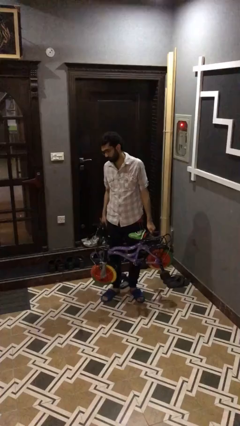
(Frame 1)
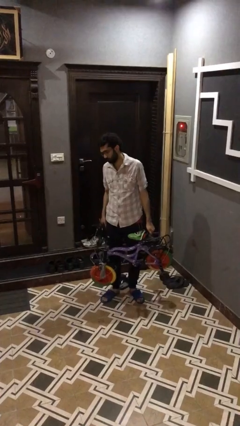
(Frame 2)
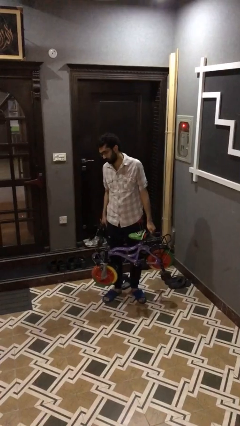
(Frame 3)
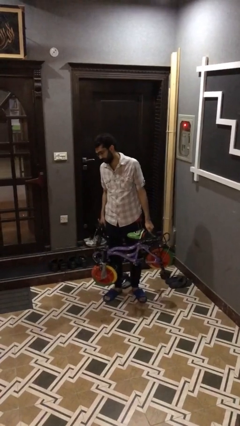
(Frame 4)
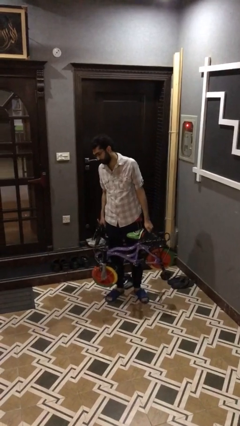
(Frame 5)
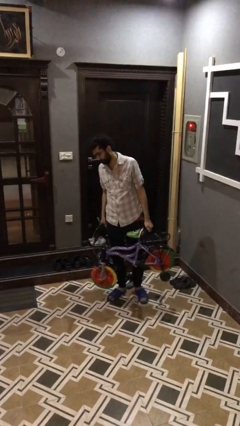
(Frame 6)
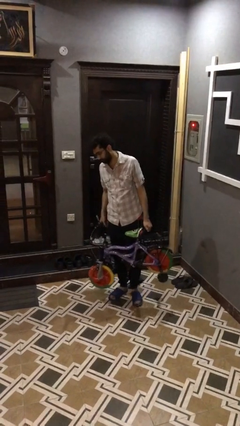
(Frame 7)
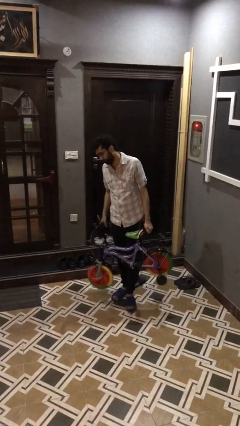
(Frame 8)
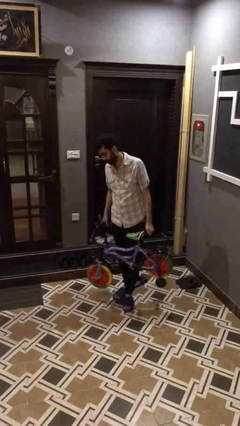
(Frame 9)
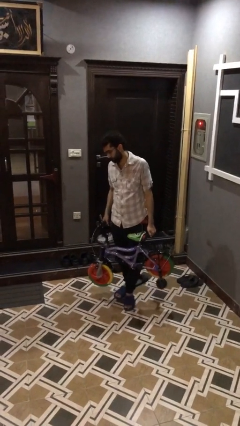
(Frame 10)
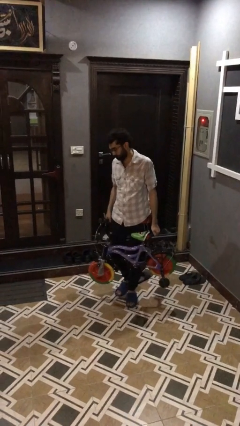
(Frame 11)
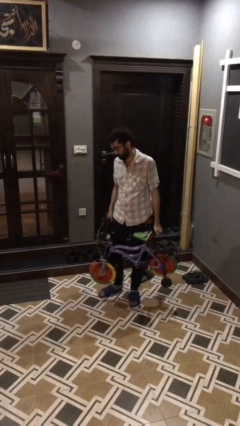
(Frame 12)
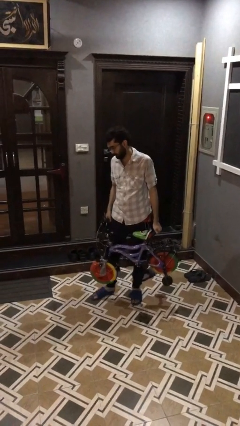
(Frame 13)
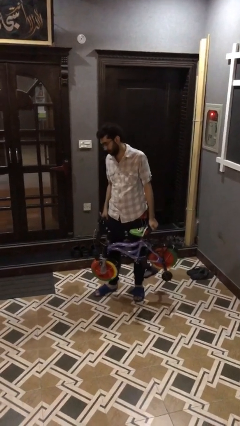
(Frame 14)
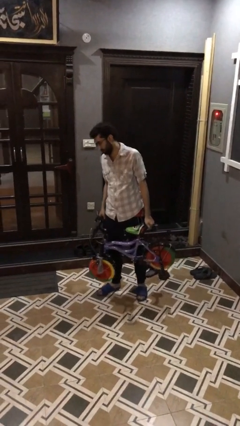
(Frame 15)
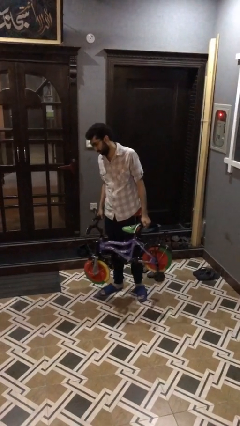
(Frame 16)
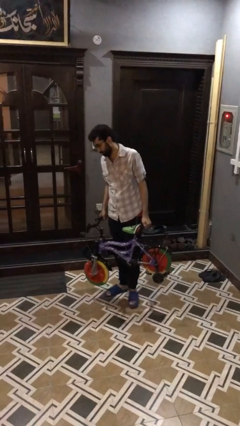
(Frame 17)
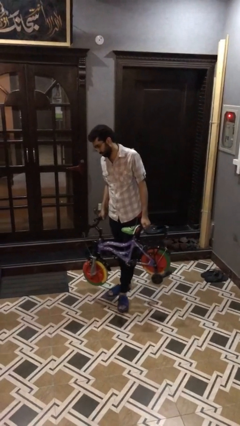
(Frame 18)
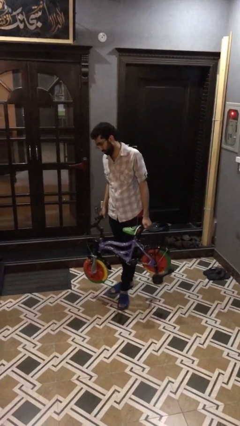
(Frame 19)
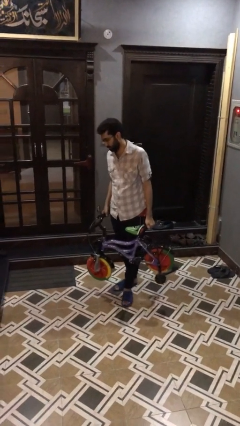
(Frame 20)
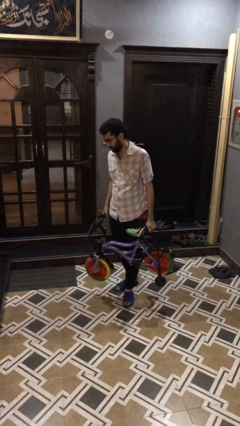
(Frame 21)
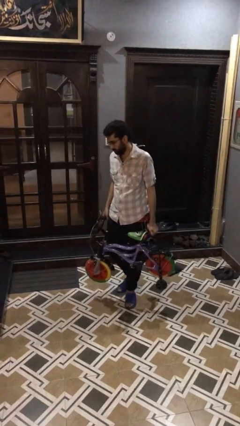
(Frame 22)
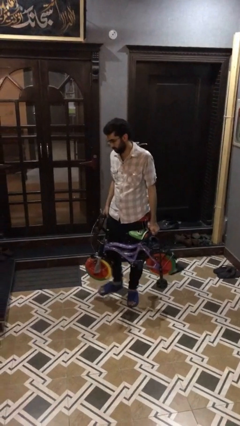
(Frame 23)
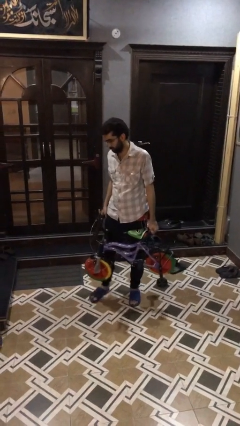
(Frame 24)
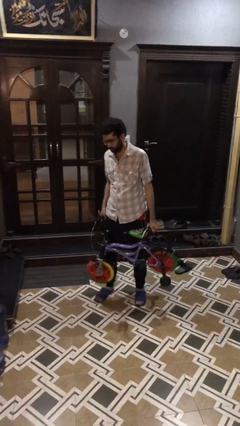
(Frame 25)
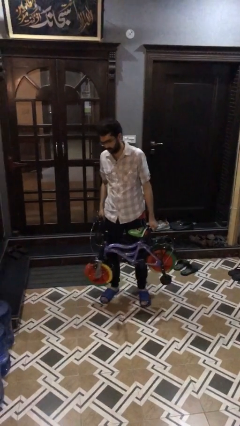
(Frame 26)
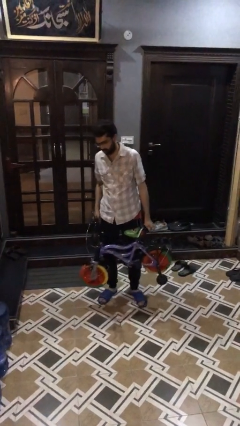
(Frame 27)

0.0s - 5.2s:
person carries heavy object

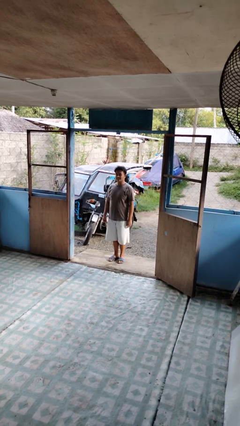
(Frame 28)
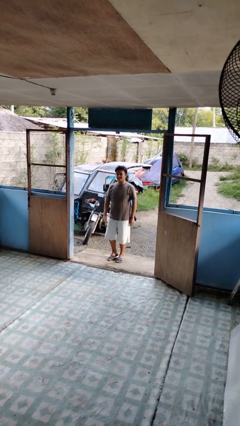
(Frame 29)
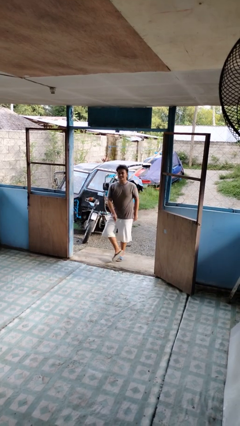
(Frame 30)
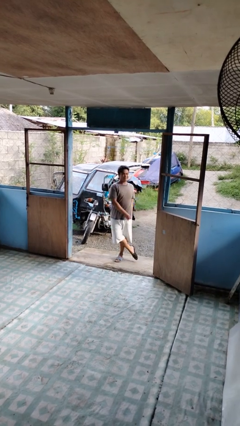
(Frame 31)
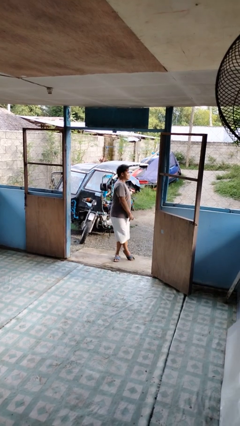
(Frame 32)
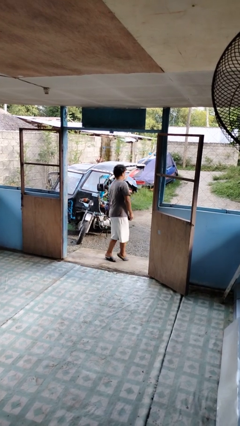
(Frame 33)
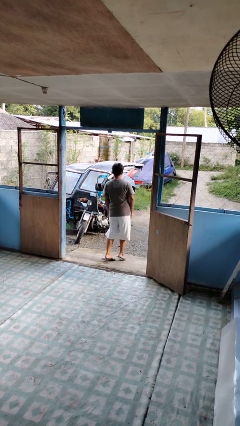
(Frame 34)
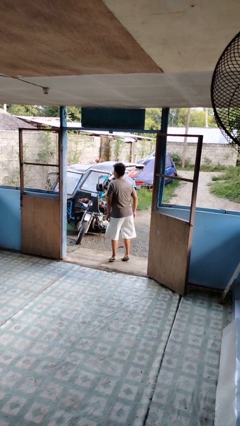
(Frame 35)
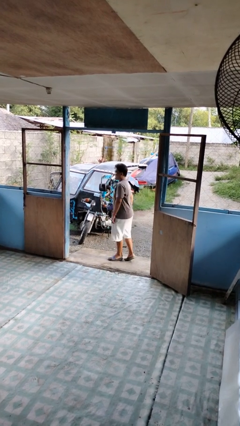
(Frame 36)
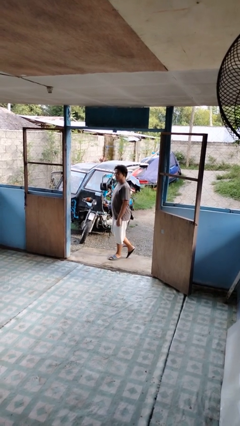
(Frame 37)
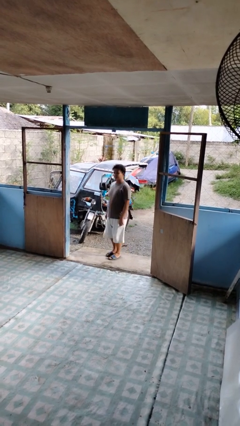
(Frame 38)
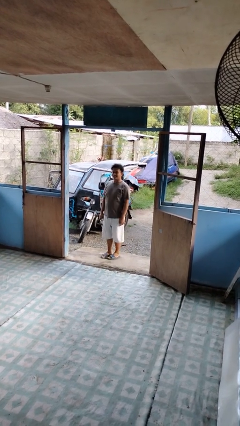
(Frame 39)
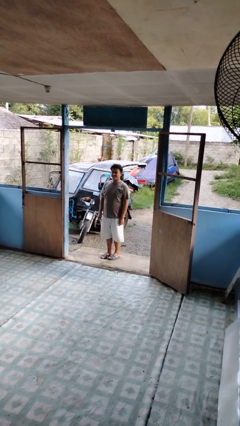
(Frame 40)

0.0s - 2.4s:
person twirls

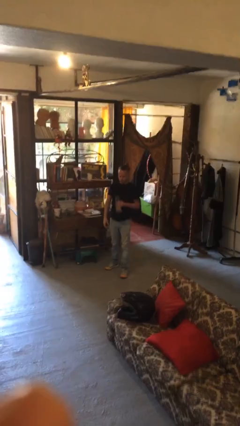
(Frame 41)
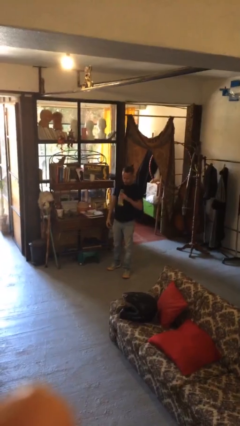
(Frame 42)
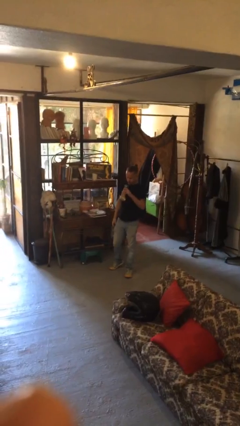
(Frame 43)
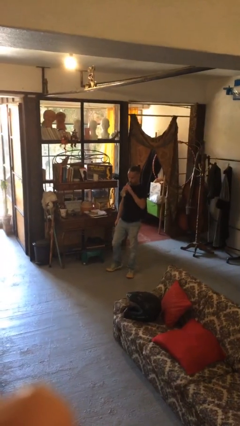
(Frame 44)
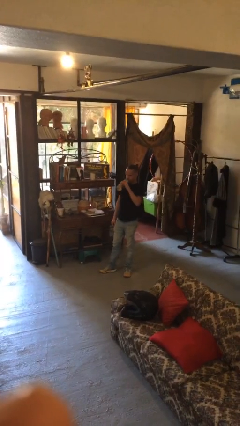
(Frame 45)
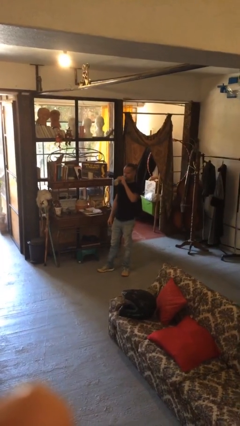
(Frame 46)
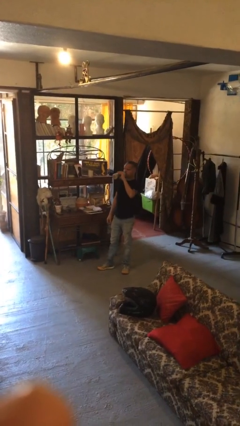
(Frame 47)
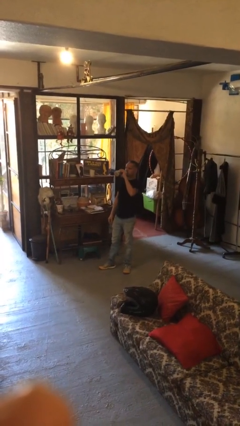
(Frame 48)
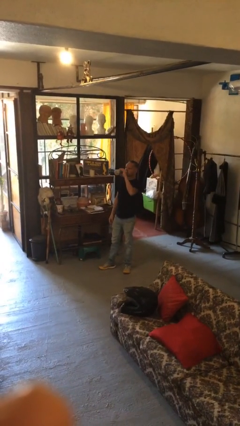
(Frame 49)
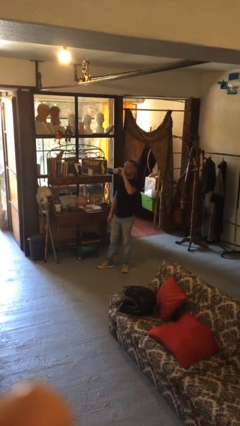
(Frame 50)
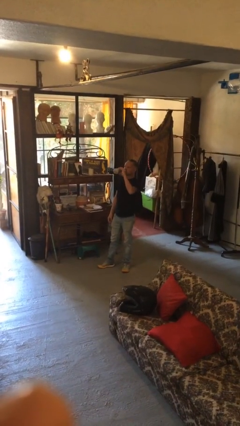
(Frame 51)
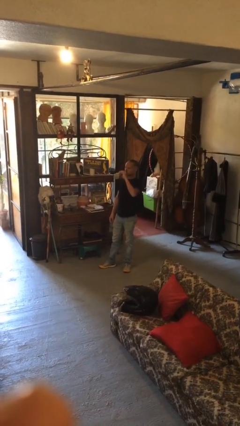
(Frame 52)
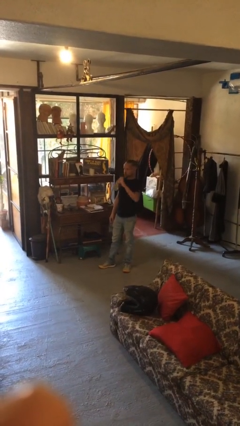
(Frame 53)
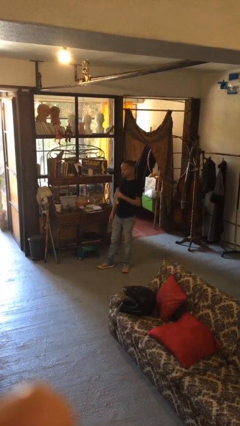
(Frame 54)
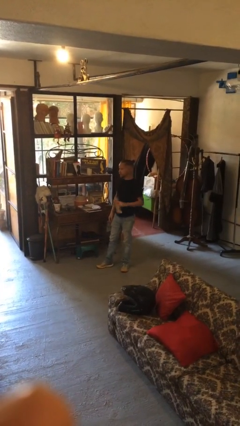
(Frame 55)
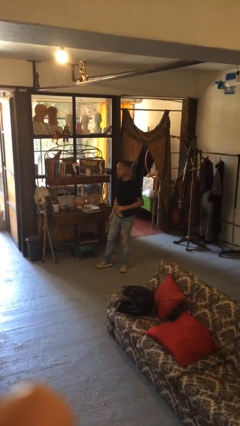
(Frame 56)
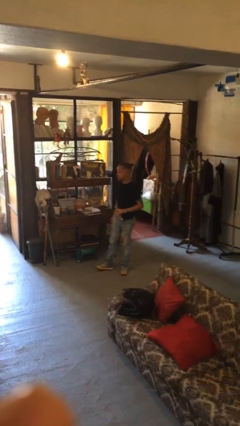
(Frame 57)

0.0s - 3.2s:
person drinks from bottle

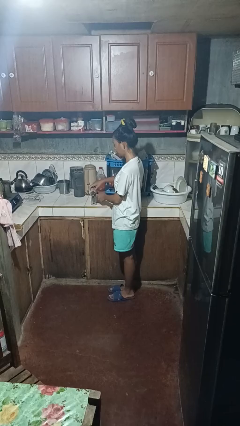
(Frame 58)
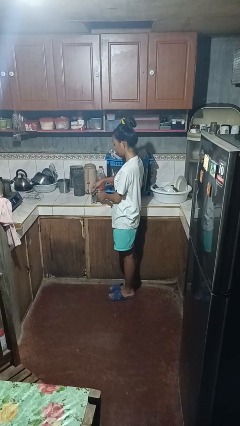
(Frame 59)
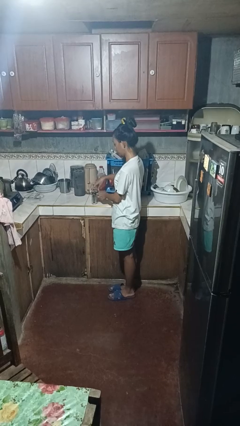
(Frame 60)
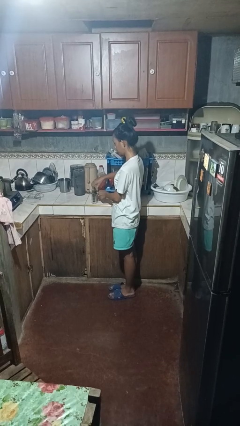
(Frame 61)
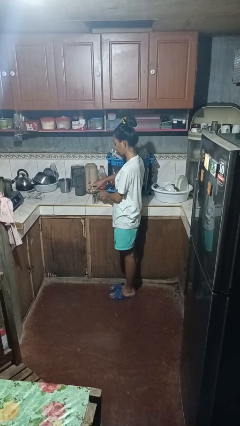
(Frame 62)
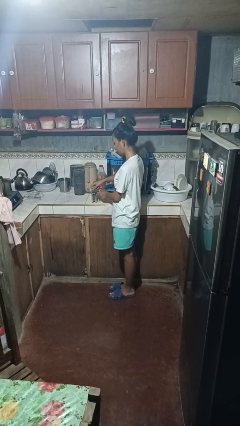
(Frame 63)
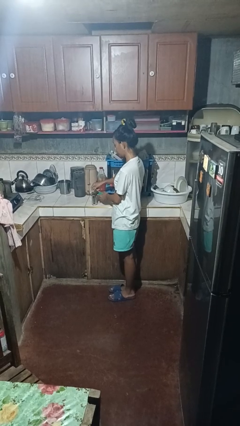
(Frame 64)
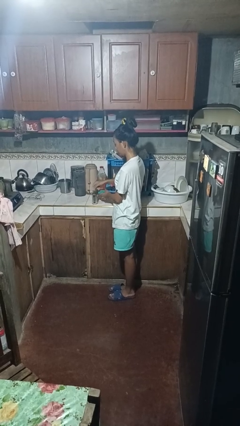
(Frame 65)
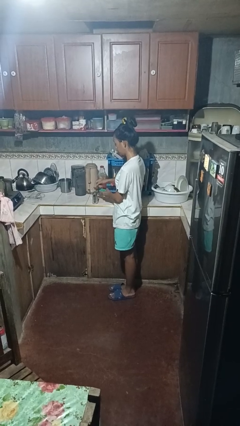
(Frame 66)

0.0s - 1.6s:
person opens can with can opener

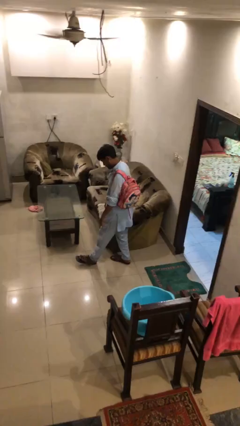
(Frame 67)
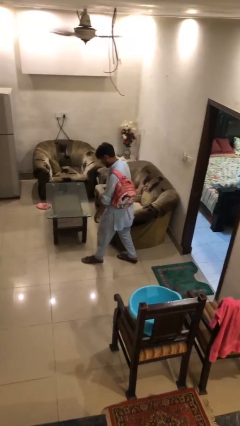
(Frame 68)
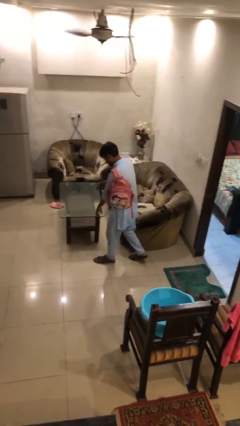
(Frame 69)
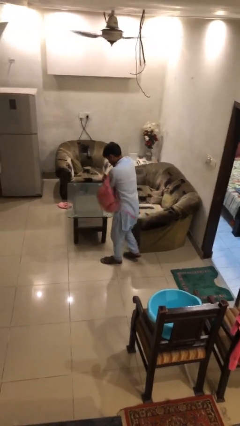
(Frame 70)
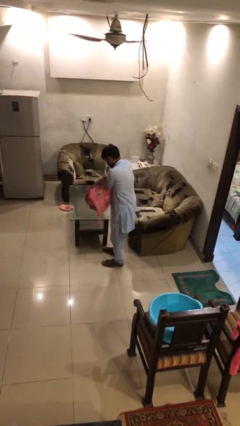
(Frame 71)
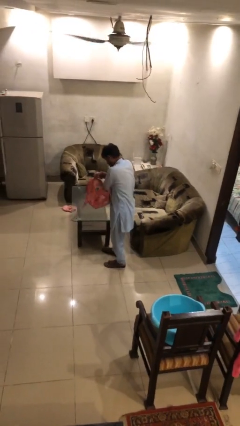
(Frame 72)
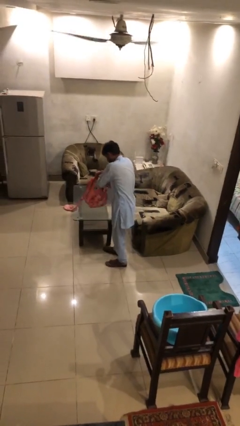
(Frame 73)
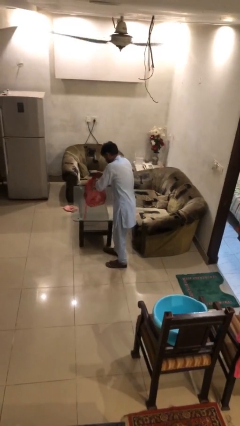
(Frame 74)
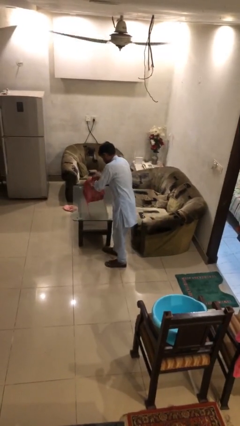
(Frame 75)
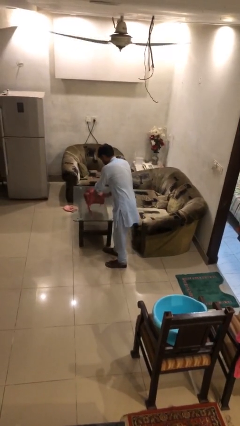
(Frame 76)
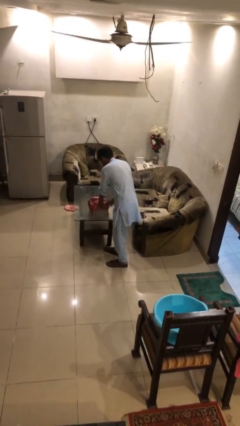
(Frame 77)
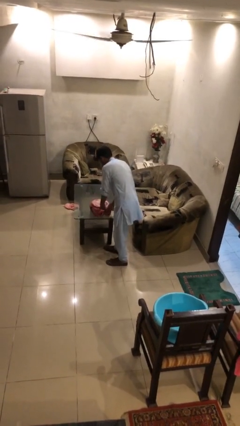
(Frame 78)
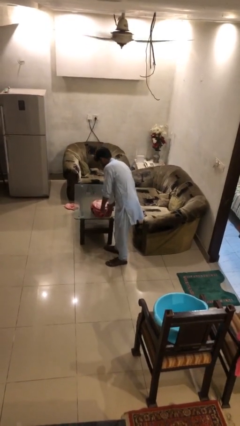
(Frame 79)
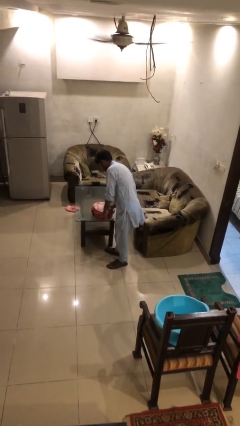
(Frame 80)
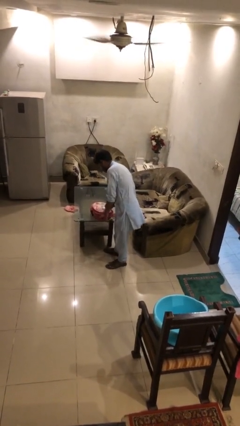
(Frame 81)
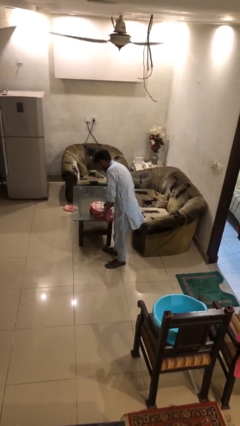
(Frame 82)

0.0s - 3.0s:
person puts down object on table

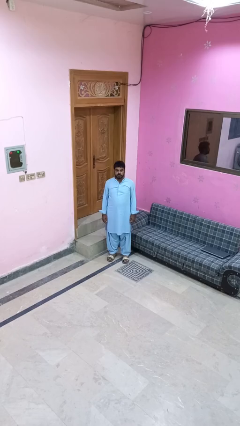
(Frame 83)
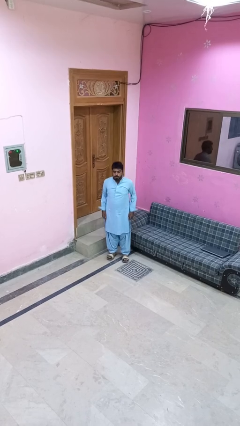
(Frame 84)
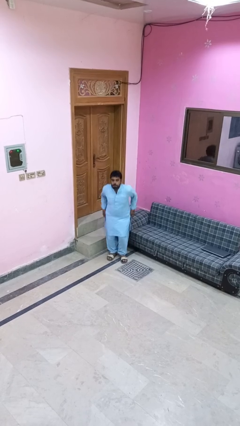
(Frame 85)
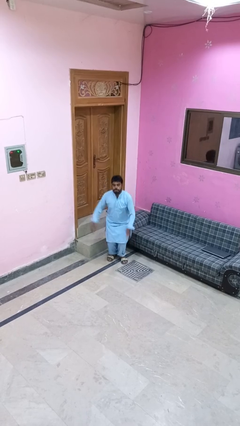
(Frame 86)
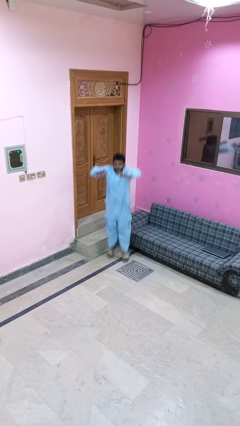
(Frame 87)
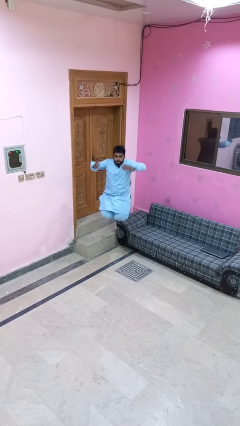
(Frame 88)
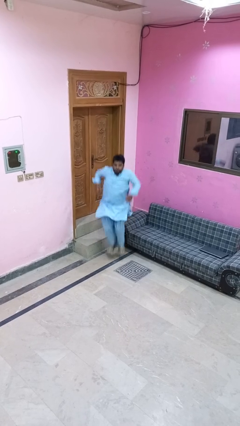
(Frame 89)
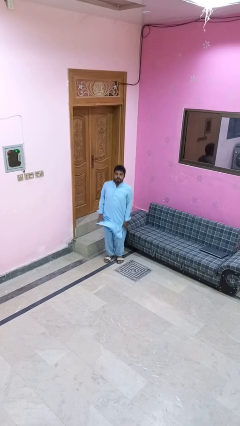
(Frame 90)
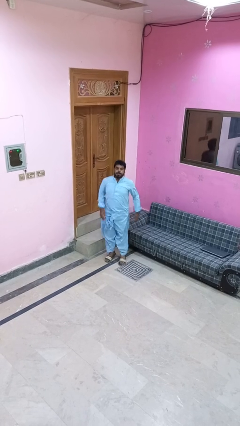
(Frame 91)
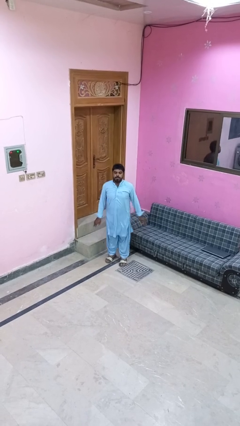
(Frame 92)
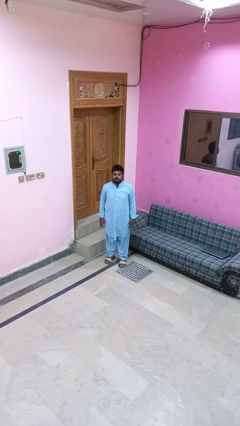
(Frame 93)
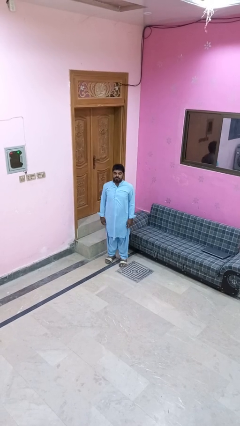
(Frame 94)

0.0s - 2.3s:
person jumps
